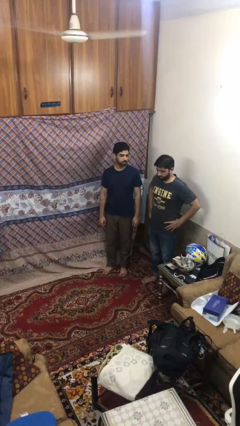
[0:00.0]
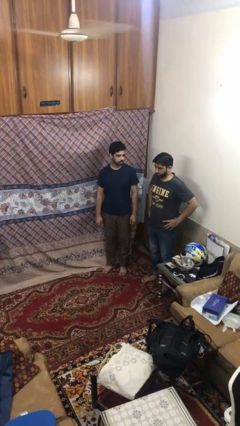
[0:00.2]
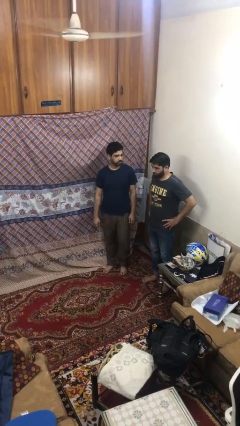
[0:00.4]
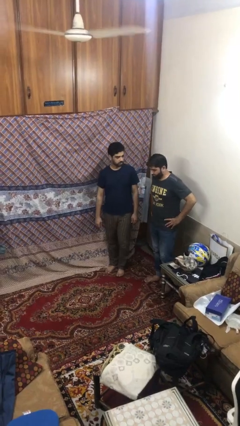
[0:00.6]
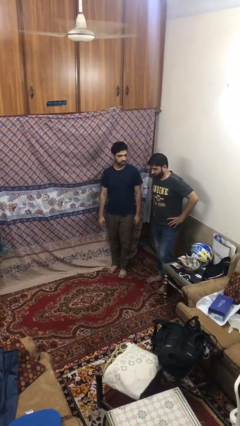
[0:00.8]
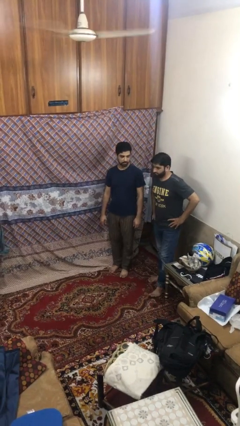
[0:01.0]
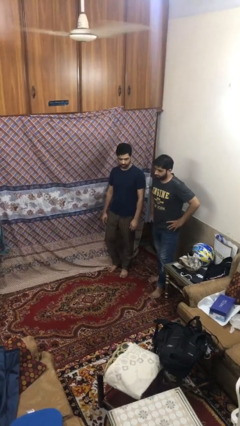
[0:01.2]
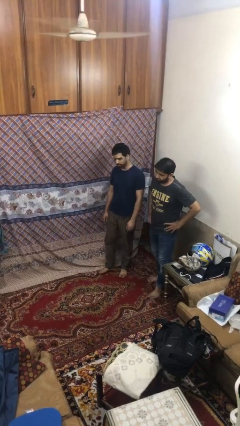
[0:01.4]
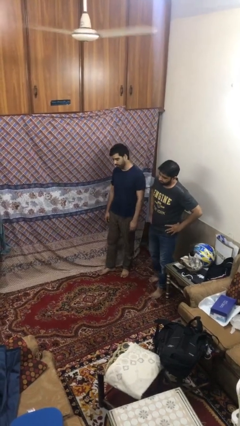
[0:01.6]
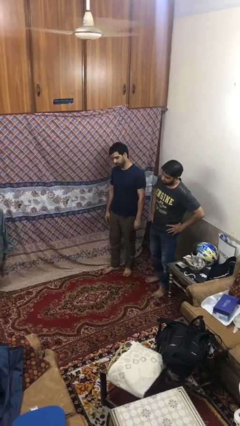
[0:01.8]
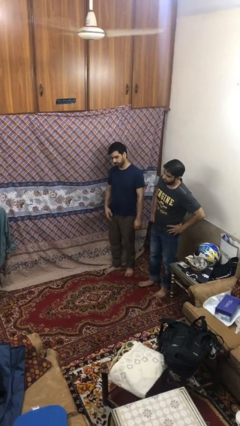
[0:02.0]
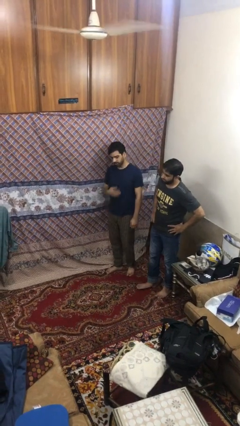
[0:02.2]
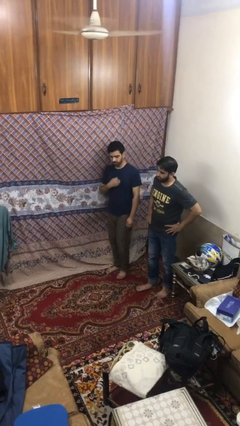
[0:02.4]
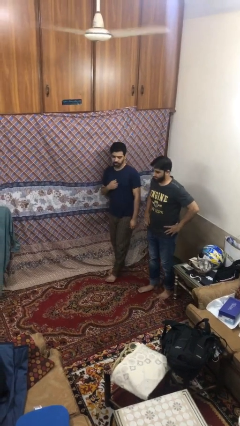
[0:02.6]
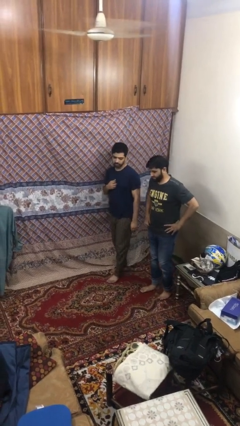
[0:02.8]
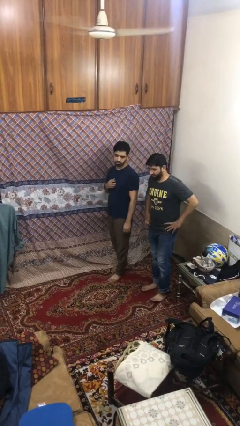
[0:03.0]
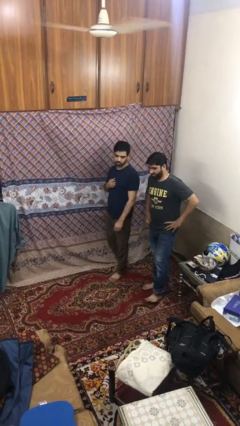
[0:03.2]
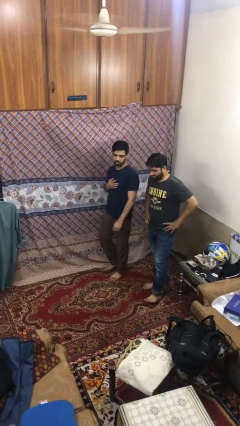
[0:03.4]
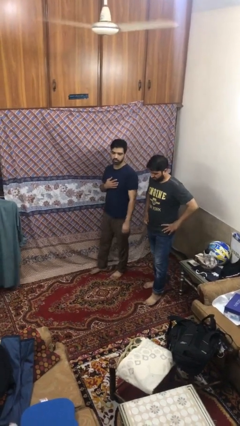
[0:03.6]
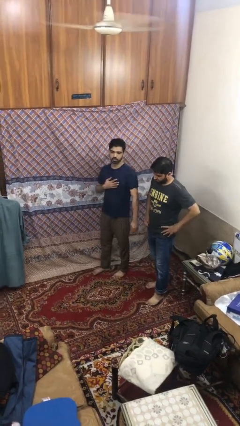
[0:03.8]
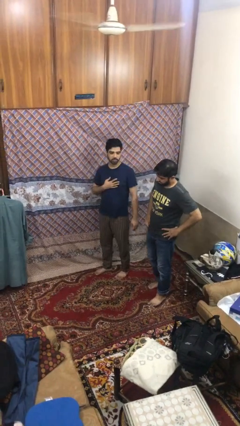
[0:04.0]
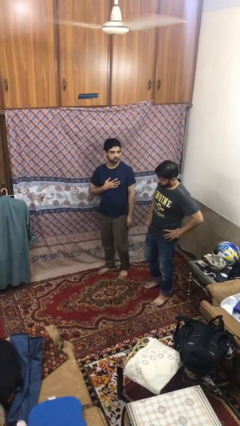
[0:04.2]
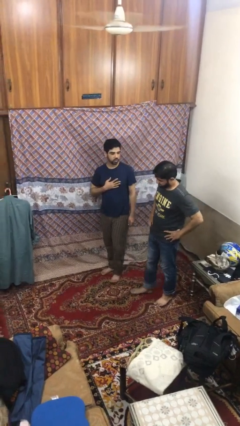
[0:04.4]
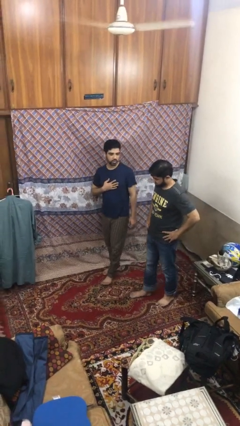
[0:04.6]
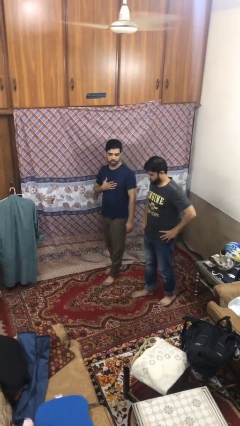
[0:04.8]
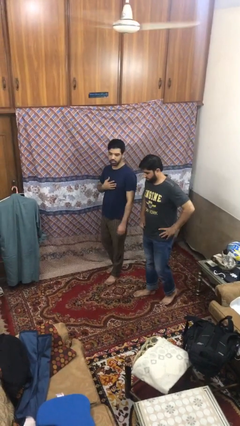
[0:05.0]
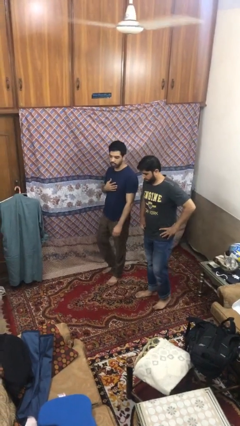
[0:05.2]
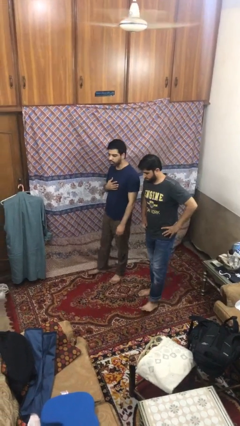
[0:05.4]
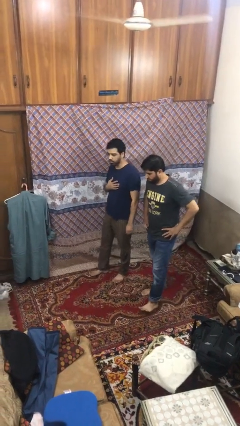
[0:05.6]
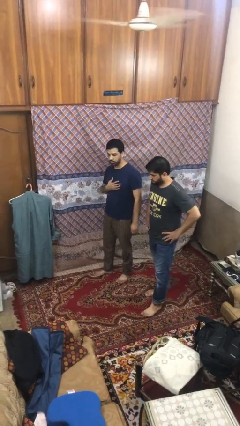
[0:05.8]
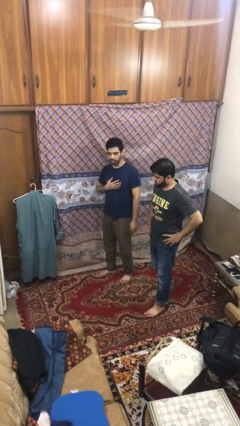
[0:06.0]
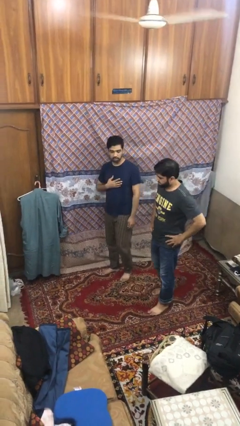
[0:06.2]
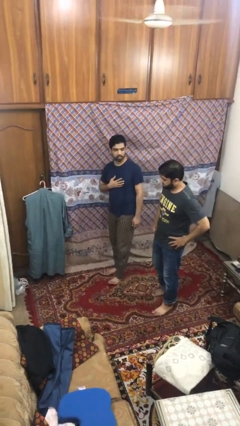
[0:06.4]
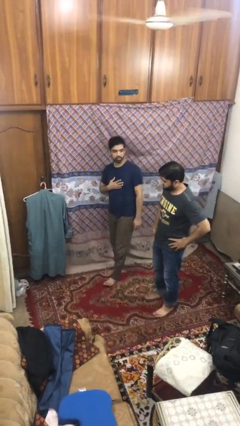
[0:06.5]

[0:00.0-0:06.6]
person talks to person

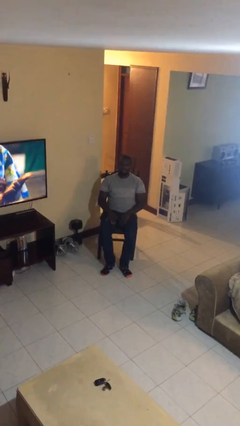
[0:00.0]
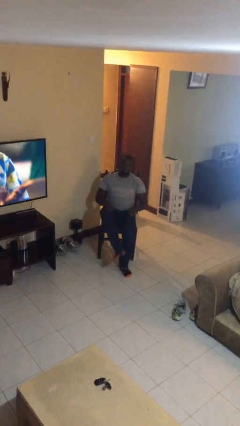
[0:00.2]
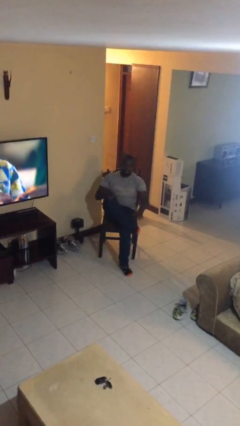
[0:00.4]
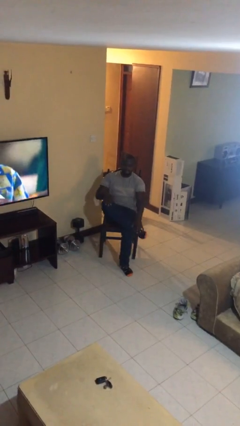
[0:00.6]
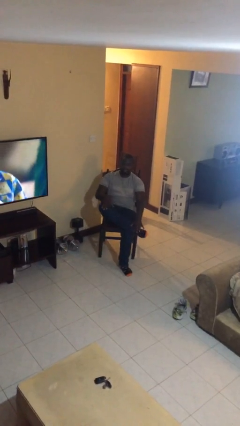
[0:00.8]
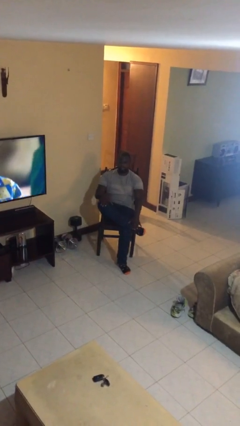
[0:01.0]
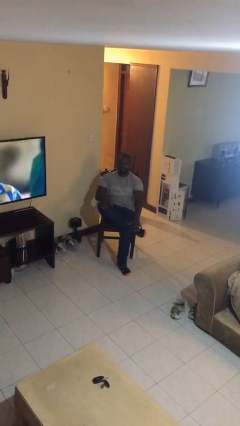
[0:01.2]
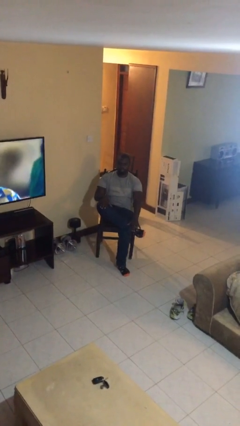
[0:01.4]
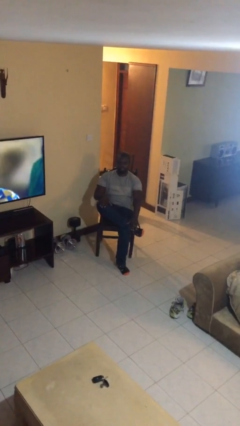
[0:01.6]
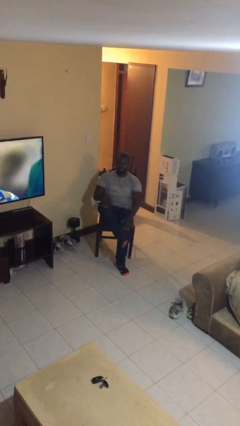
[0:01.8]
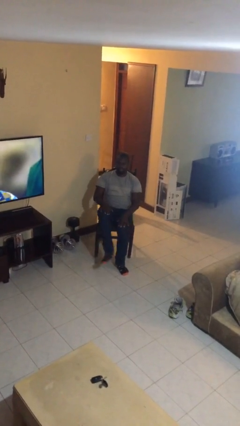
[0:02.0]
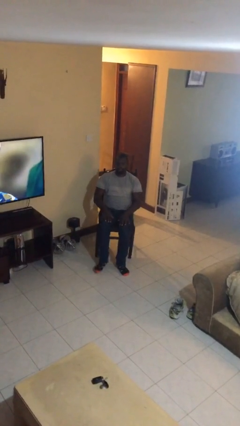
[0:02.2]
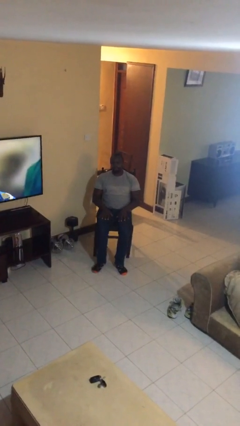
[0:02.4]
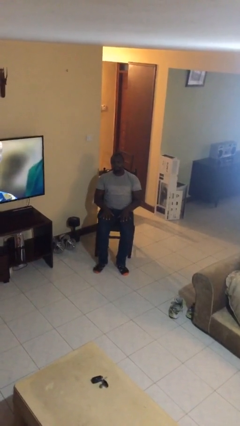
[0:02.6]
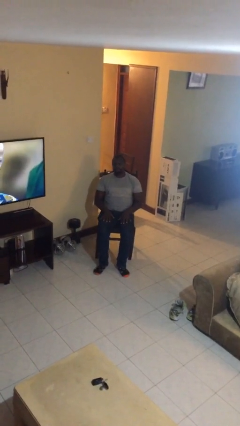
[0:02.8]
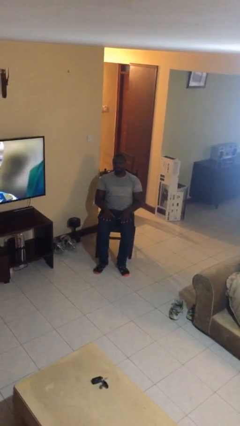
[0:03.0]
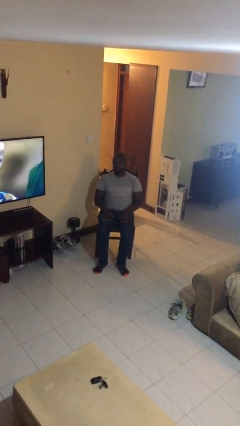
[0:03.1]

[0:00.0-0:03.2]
person crosses legs

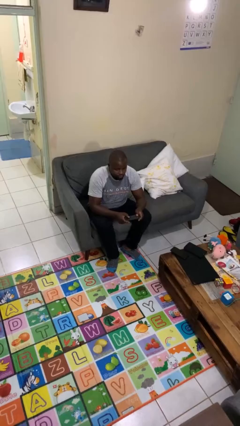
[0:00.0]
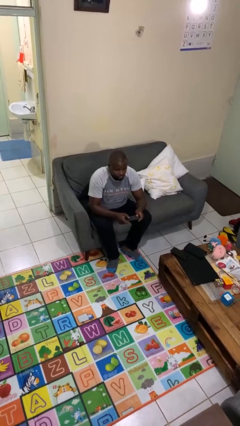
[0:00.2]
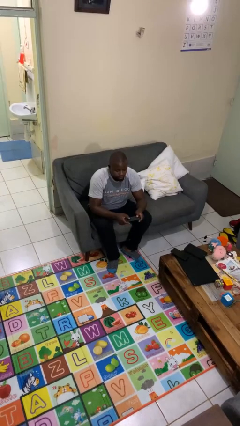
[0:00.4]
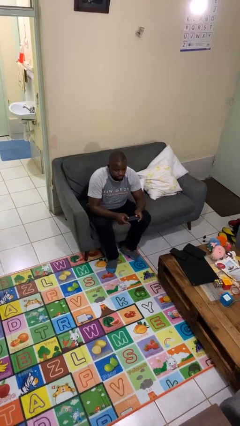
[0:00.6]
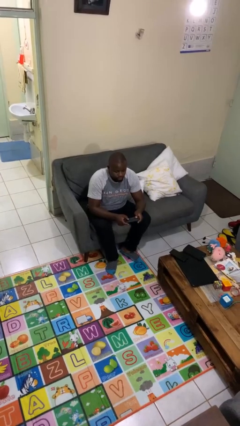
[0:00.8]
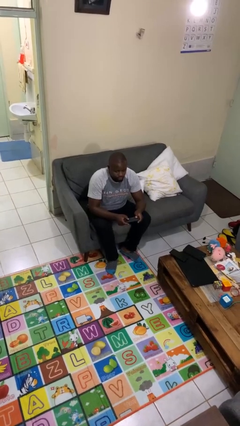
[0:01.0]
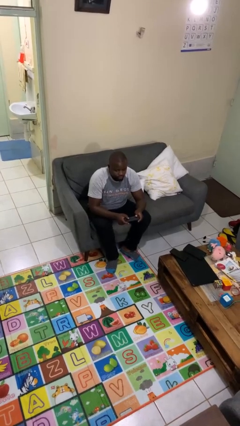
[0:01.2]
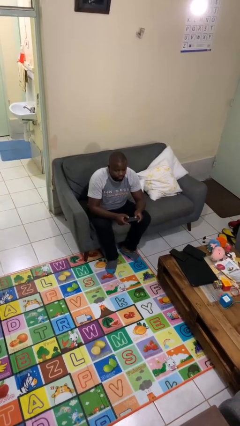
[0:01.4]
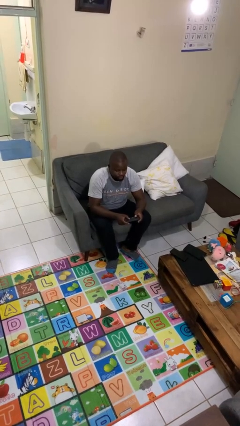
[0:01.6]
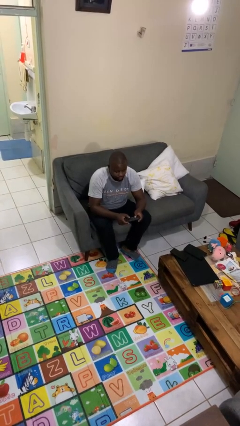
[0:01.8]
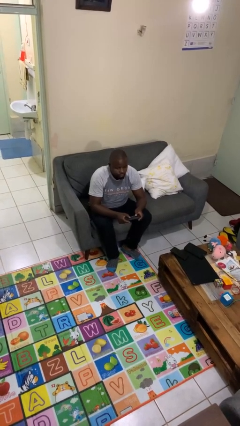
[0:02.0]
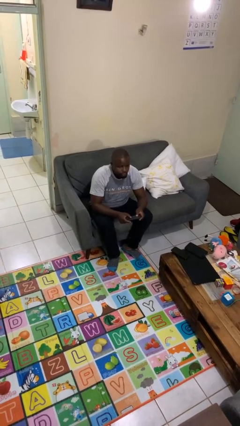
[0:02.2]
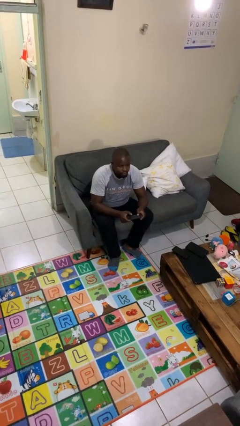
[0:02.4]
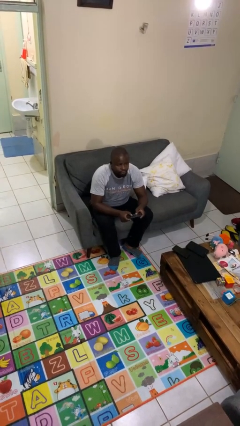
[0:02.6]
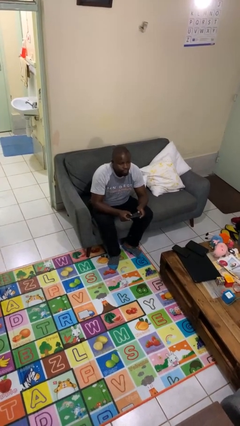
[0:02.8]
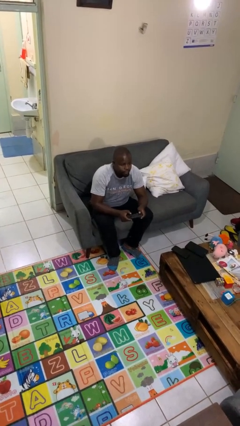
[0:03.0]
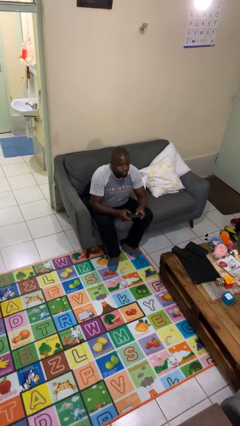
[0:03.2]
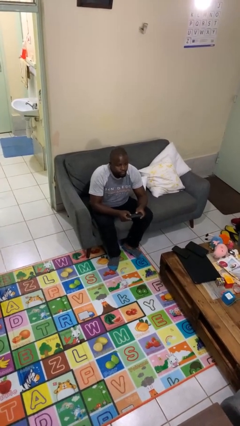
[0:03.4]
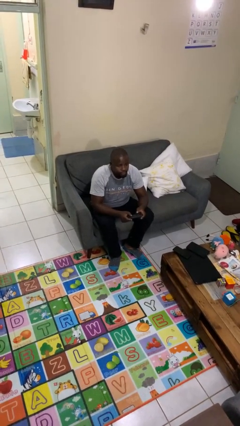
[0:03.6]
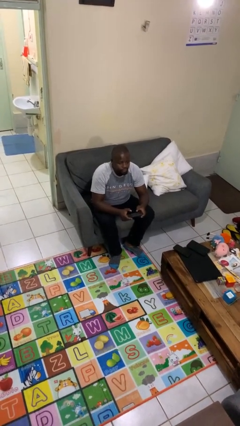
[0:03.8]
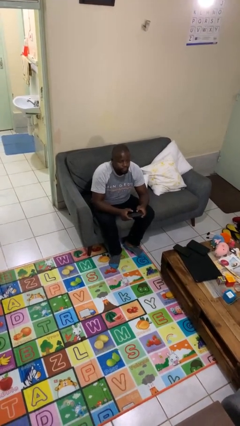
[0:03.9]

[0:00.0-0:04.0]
person interacts with handheld game

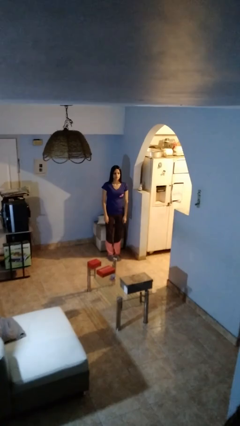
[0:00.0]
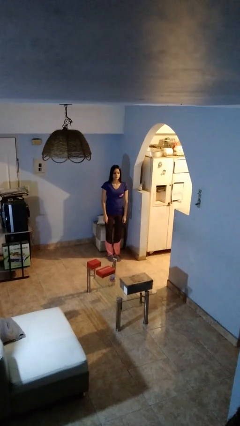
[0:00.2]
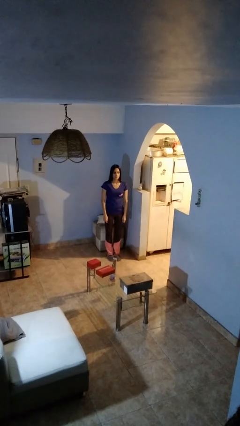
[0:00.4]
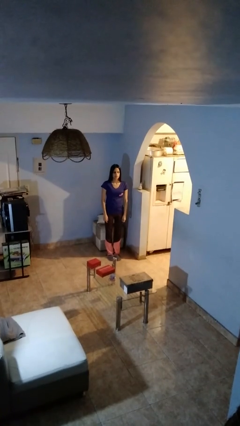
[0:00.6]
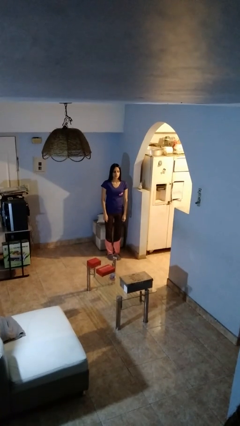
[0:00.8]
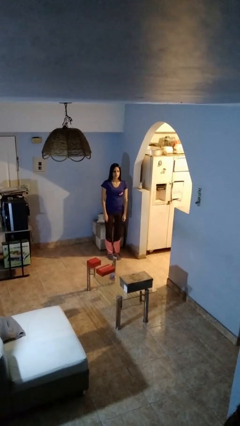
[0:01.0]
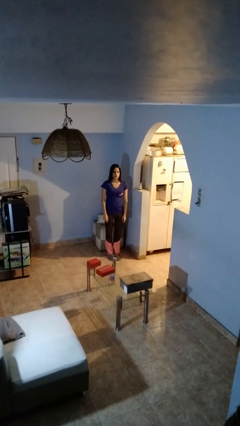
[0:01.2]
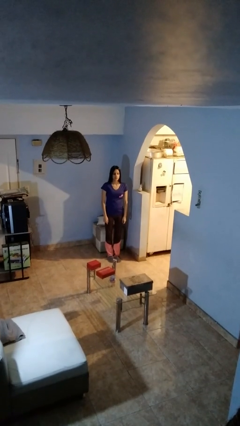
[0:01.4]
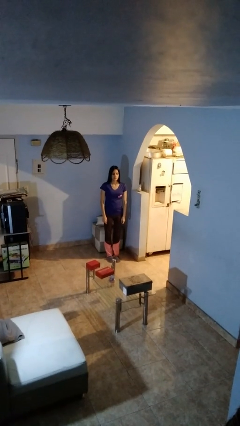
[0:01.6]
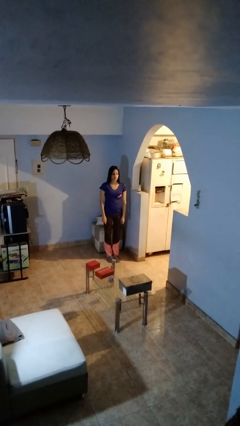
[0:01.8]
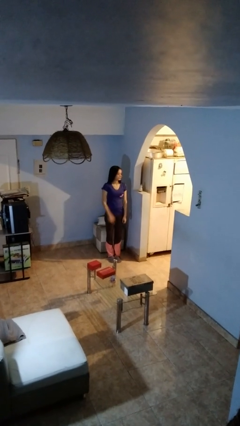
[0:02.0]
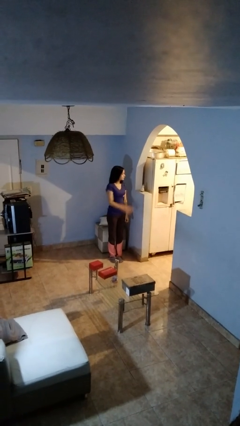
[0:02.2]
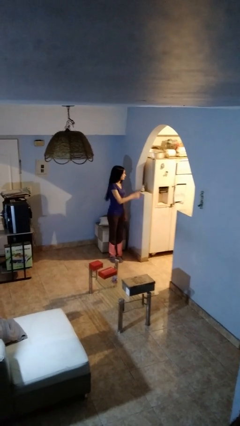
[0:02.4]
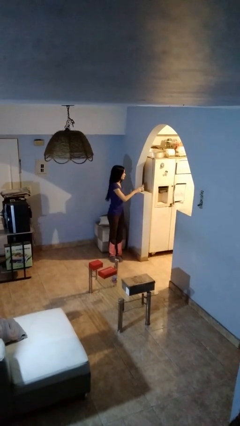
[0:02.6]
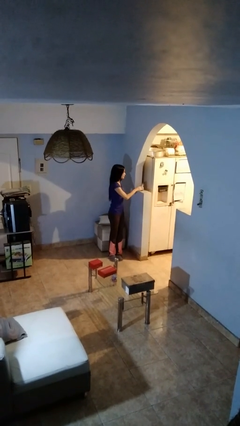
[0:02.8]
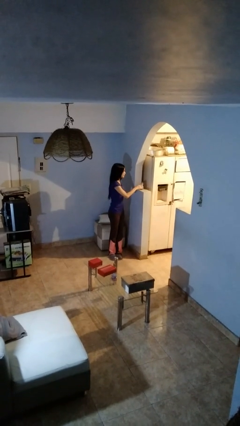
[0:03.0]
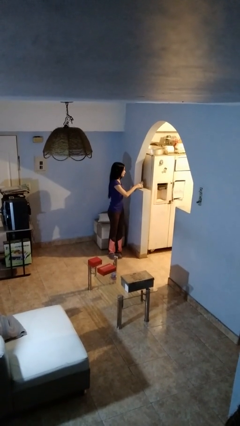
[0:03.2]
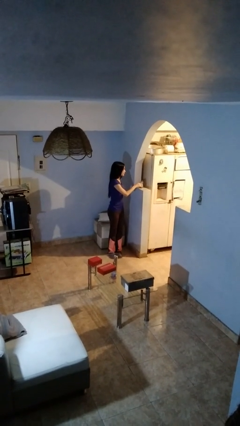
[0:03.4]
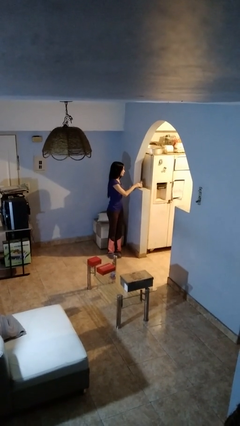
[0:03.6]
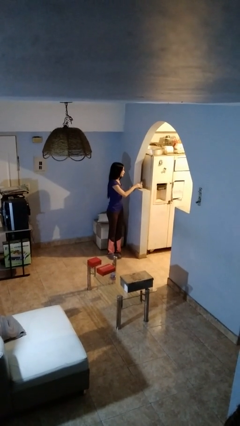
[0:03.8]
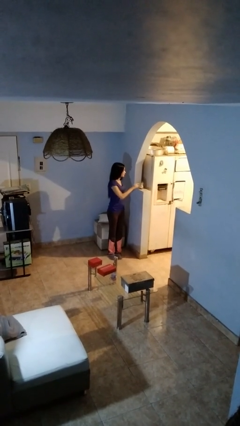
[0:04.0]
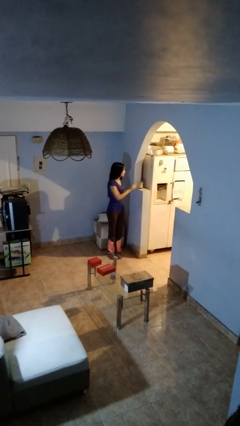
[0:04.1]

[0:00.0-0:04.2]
person taps object with finger
